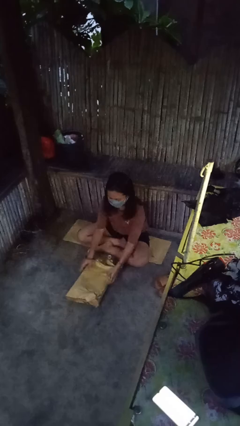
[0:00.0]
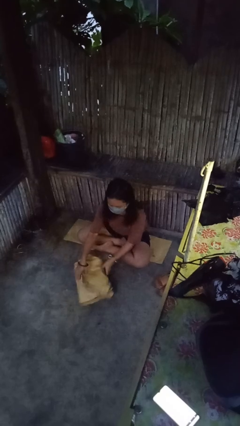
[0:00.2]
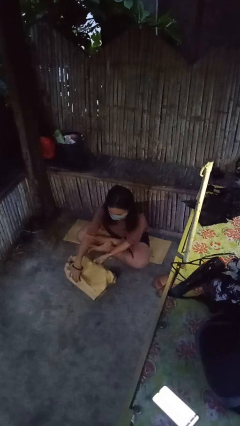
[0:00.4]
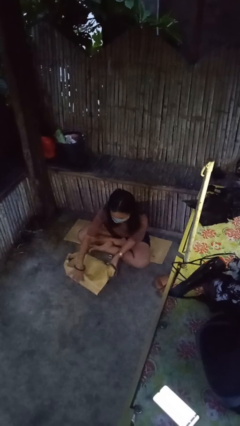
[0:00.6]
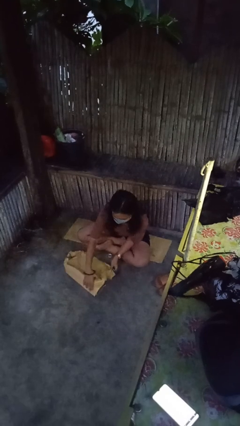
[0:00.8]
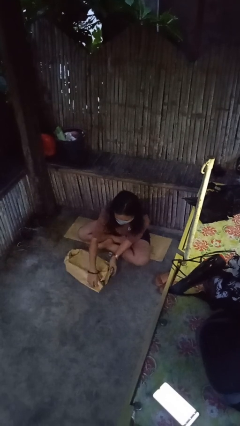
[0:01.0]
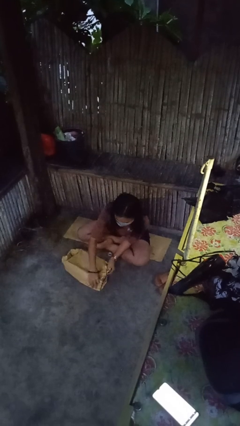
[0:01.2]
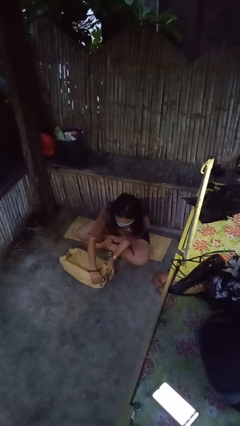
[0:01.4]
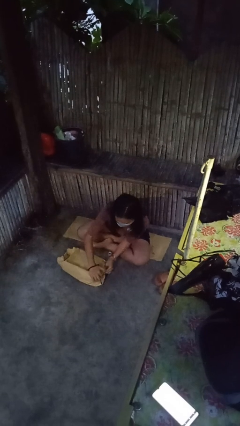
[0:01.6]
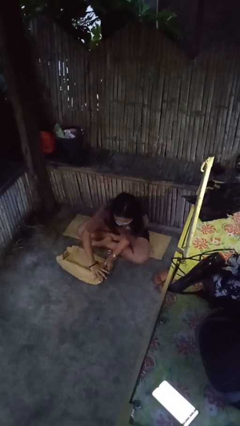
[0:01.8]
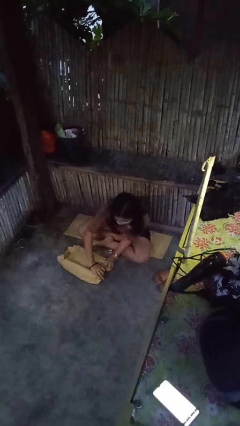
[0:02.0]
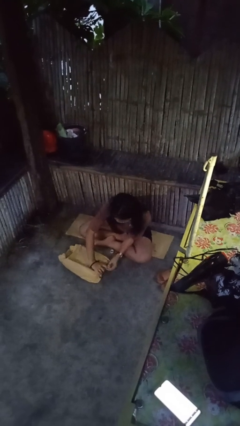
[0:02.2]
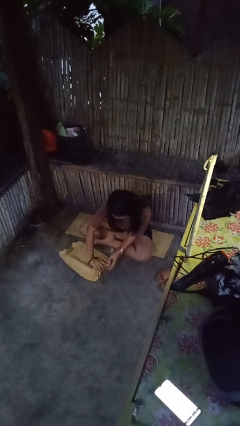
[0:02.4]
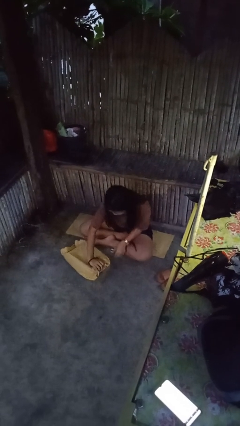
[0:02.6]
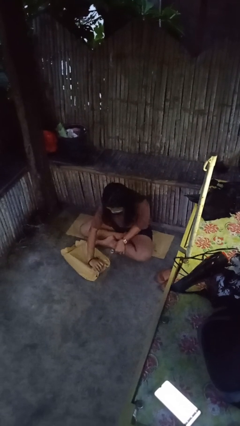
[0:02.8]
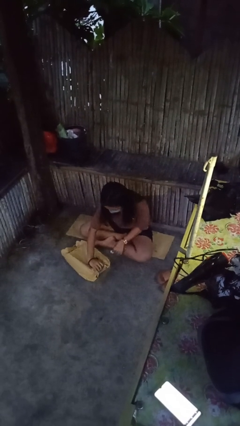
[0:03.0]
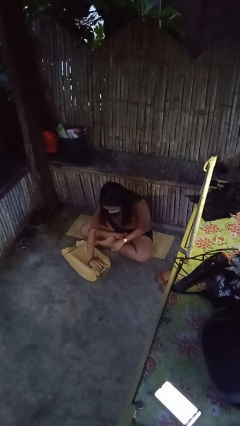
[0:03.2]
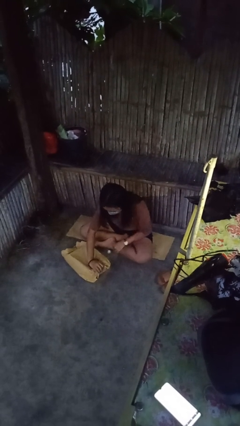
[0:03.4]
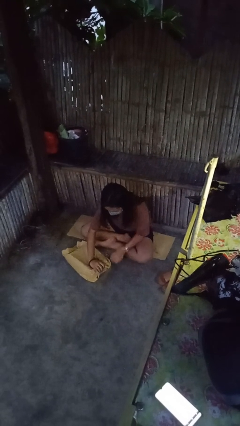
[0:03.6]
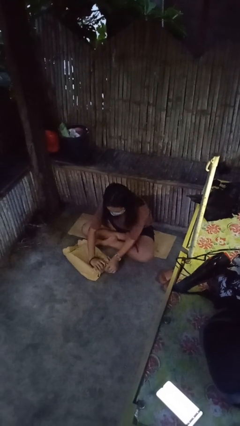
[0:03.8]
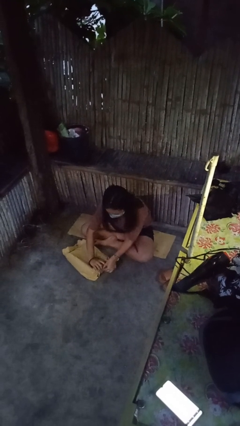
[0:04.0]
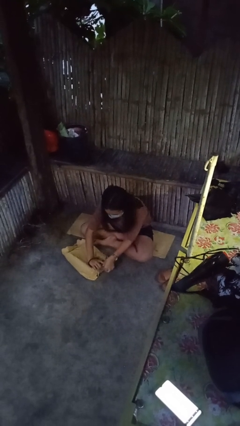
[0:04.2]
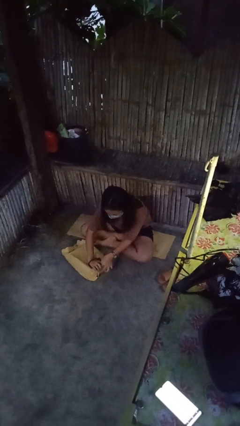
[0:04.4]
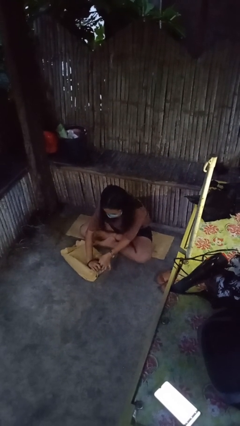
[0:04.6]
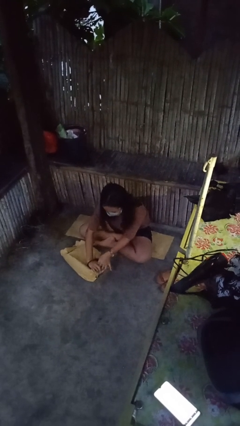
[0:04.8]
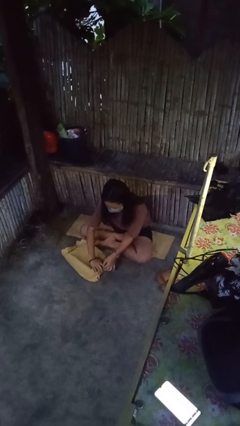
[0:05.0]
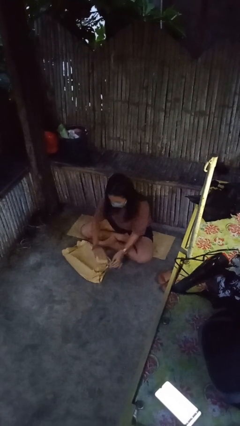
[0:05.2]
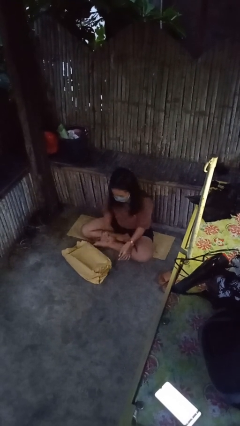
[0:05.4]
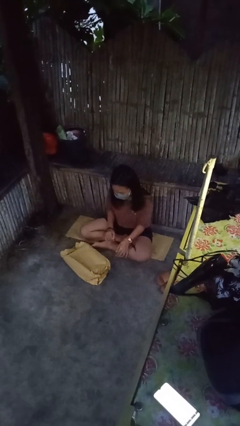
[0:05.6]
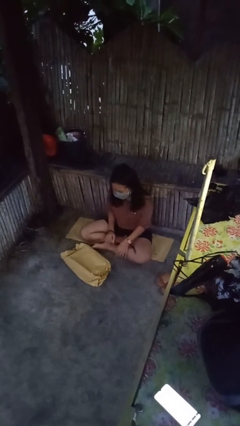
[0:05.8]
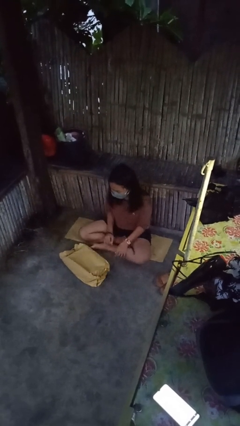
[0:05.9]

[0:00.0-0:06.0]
person wraps box

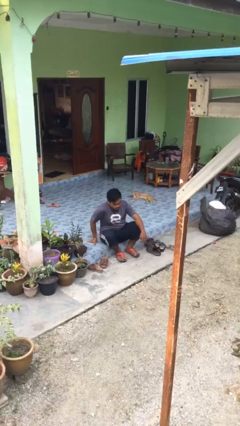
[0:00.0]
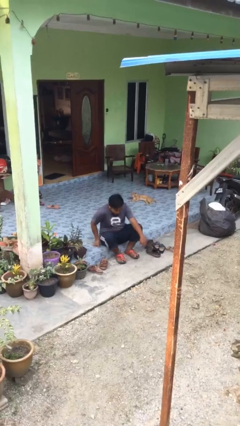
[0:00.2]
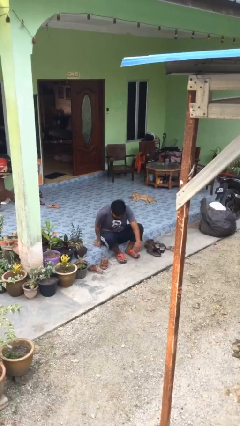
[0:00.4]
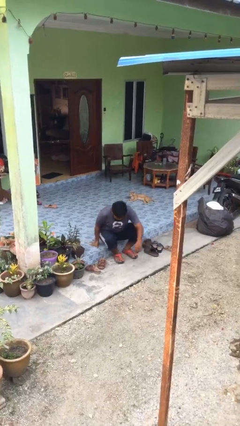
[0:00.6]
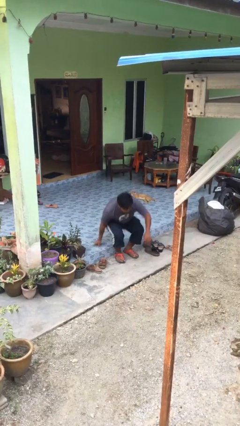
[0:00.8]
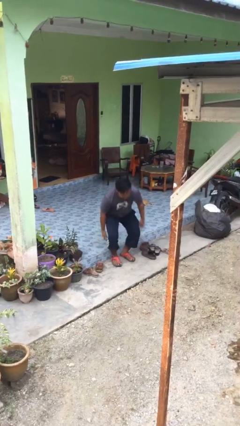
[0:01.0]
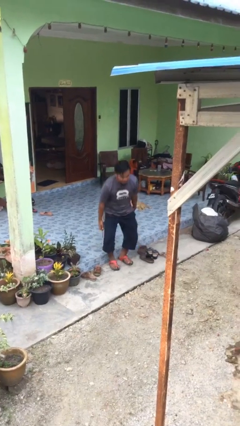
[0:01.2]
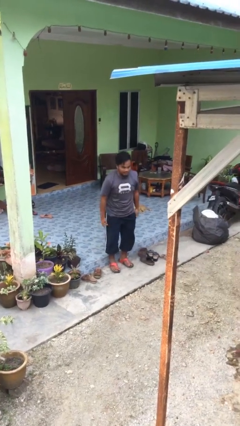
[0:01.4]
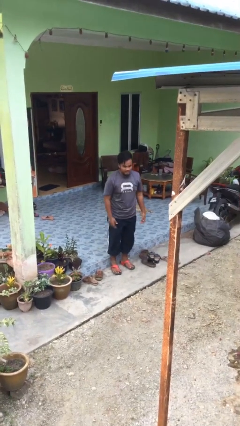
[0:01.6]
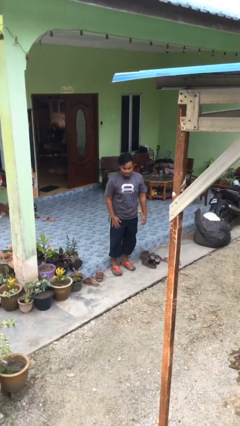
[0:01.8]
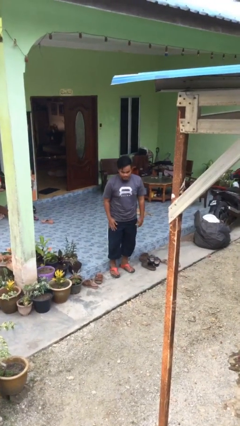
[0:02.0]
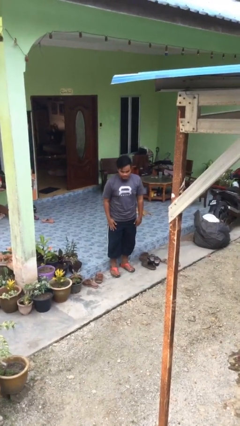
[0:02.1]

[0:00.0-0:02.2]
person stands up

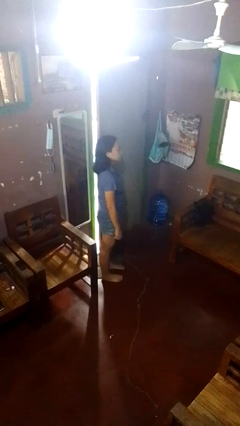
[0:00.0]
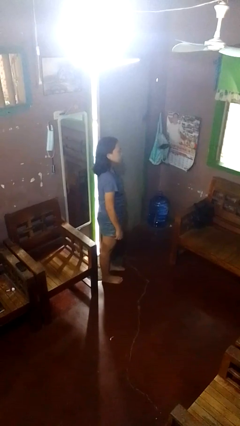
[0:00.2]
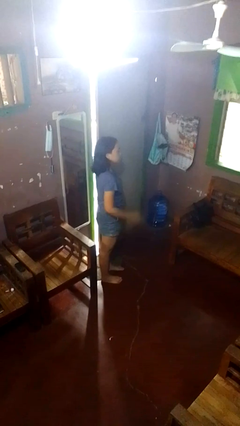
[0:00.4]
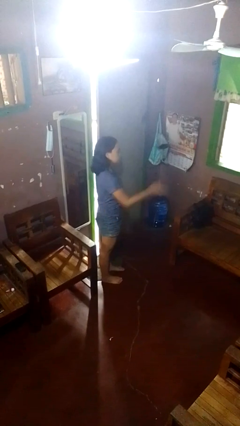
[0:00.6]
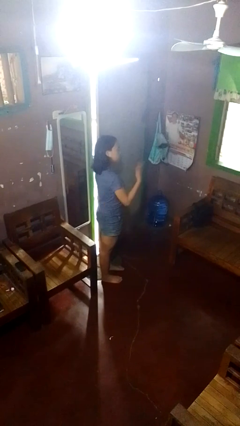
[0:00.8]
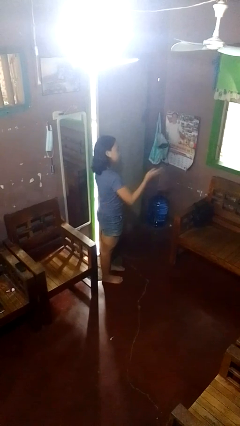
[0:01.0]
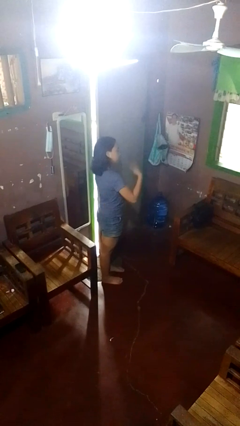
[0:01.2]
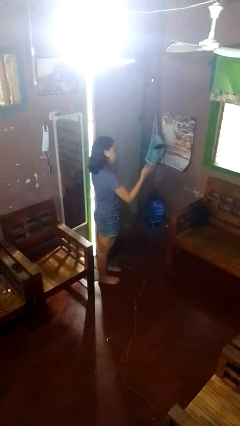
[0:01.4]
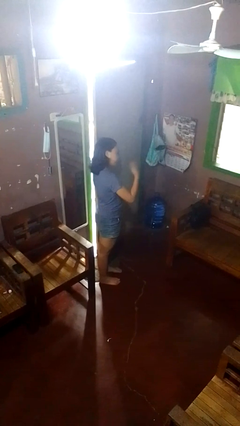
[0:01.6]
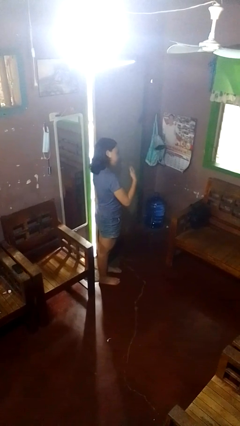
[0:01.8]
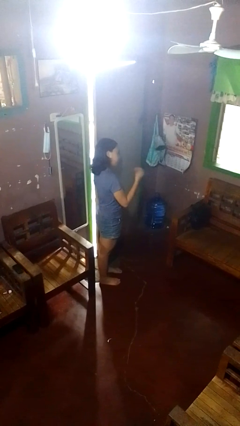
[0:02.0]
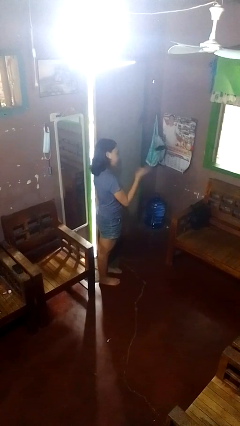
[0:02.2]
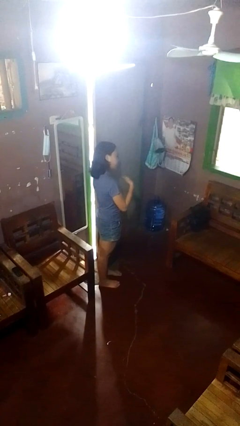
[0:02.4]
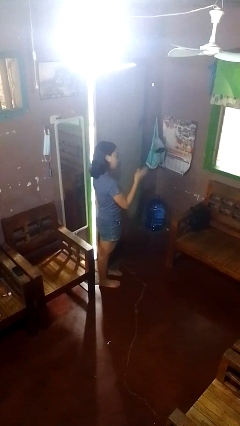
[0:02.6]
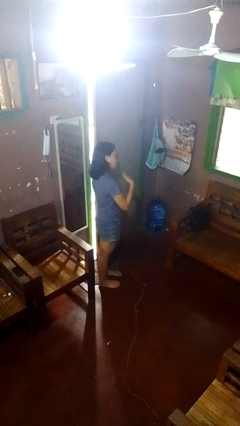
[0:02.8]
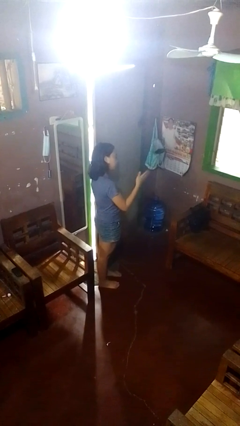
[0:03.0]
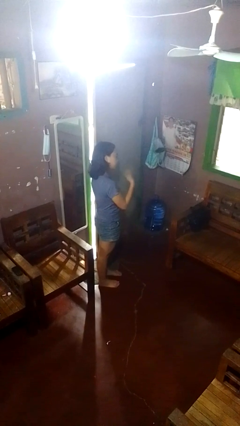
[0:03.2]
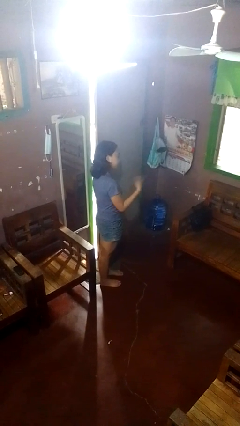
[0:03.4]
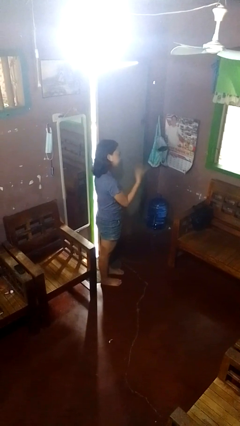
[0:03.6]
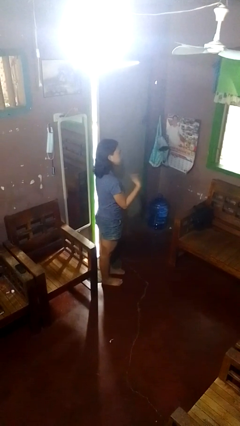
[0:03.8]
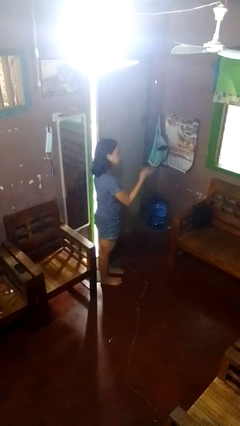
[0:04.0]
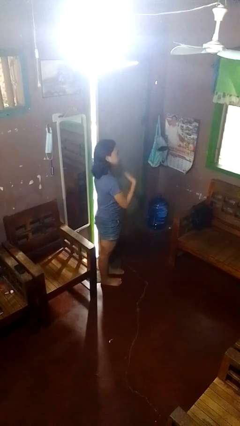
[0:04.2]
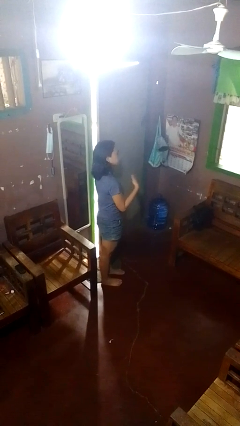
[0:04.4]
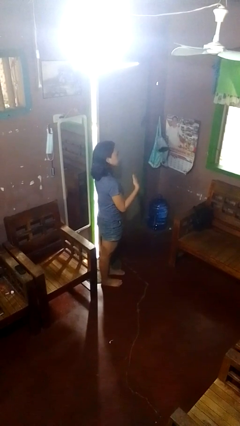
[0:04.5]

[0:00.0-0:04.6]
person gestures come here

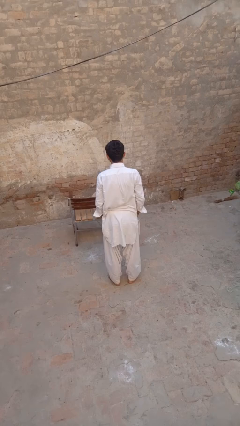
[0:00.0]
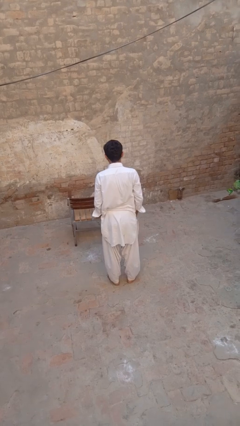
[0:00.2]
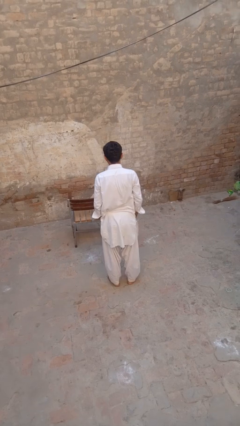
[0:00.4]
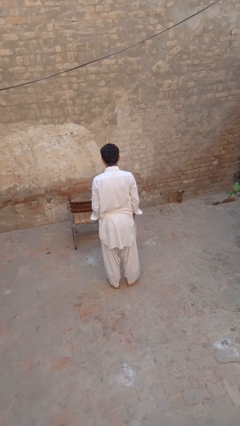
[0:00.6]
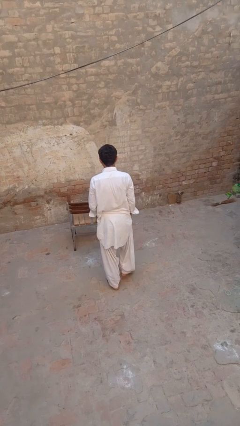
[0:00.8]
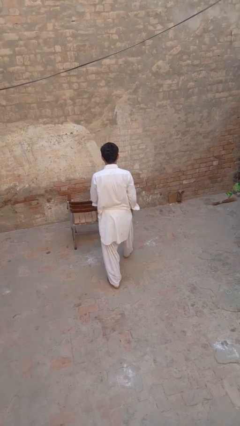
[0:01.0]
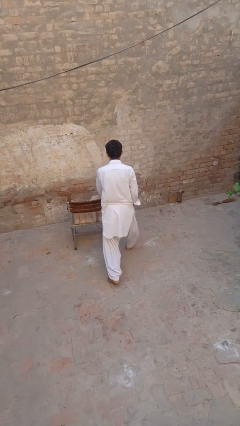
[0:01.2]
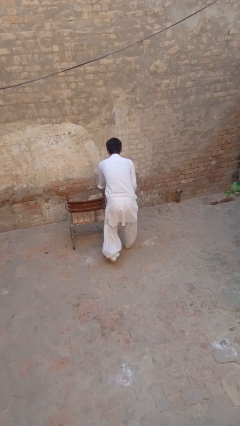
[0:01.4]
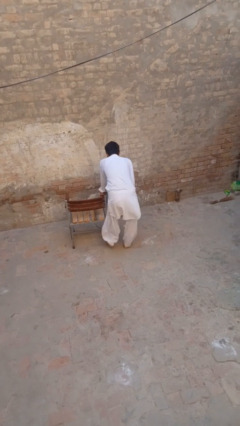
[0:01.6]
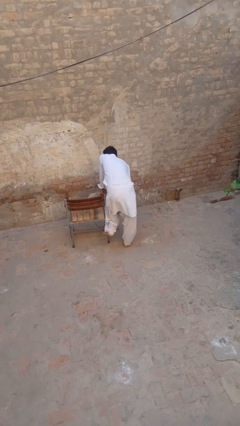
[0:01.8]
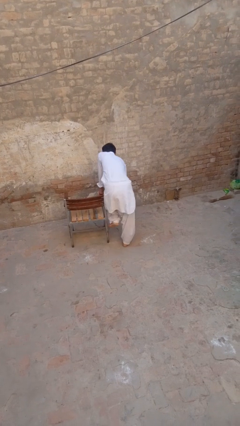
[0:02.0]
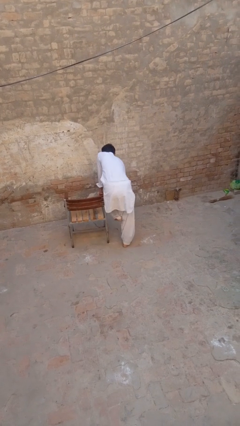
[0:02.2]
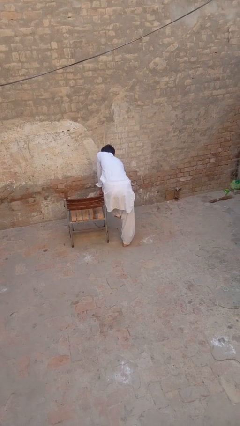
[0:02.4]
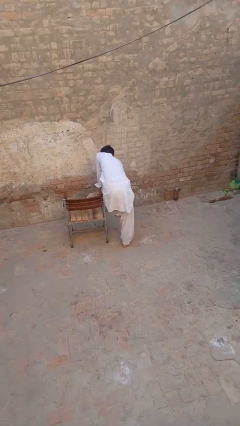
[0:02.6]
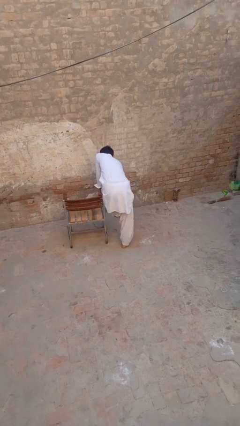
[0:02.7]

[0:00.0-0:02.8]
person stubs toe

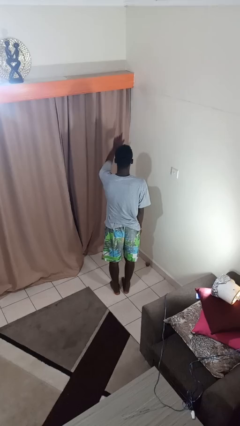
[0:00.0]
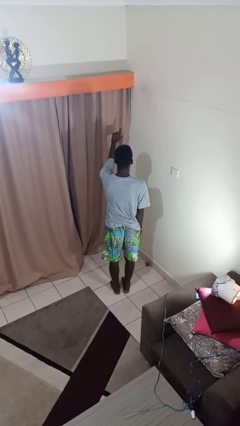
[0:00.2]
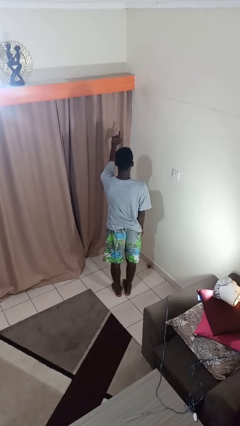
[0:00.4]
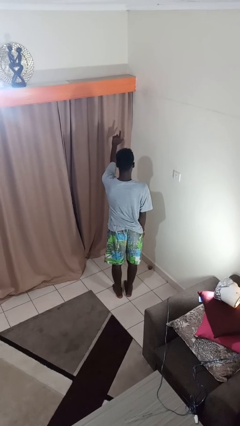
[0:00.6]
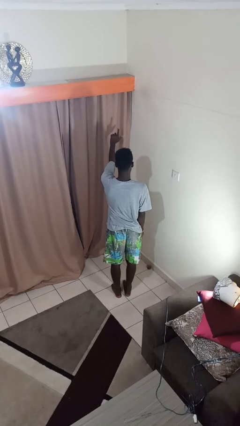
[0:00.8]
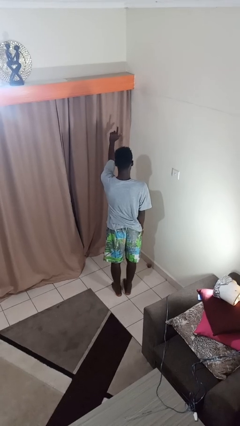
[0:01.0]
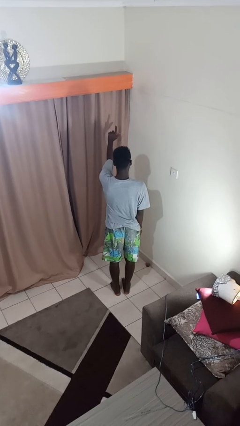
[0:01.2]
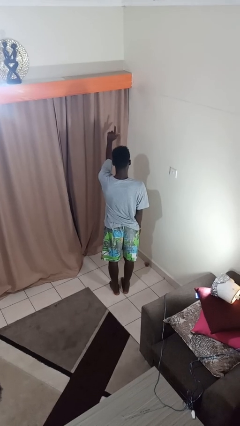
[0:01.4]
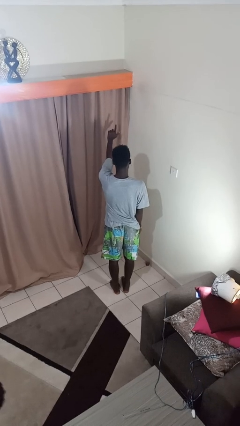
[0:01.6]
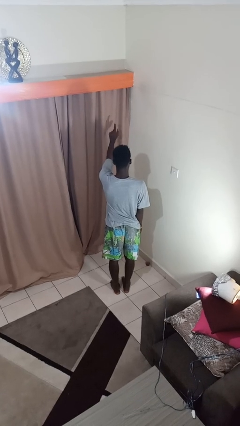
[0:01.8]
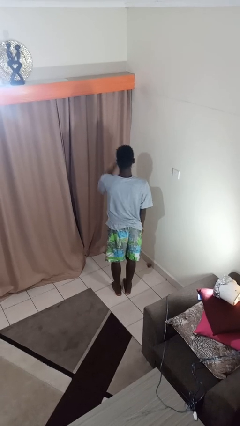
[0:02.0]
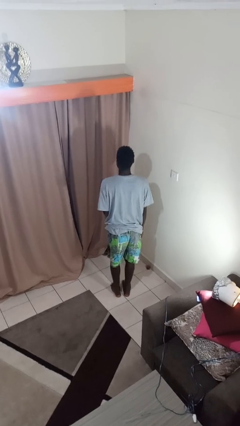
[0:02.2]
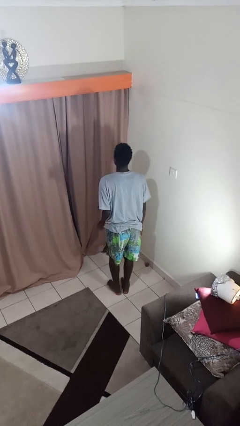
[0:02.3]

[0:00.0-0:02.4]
person gestures number one
